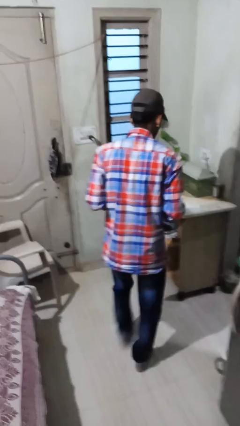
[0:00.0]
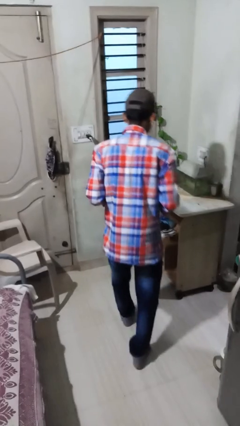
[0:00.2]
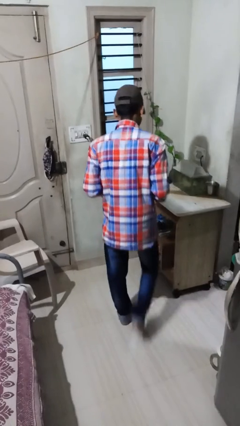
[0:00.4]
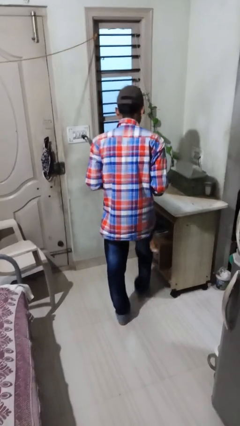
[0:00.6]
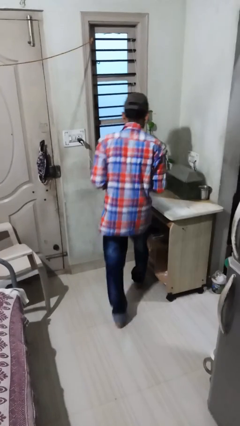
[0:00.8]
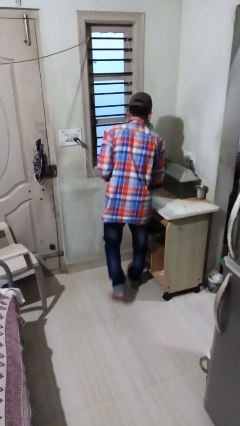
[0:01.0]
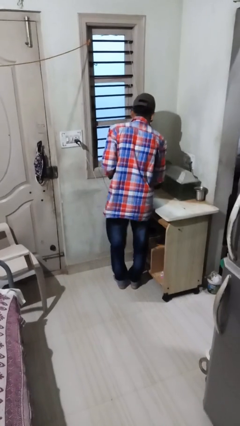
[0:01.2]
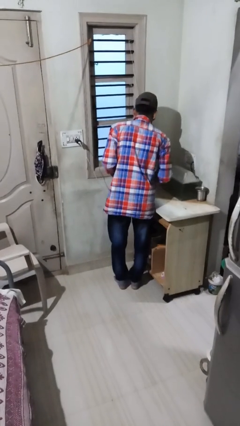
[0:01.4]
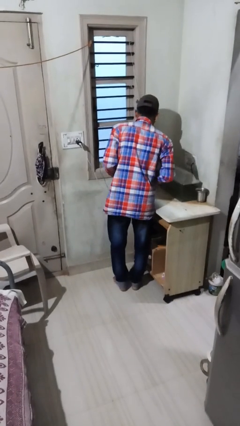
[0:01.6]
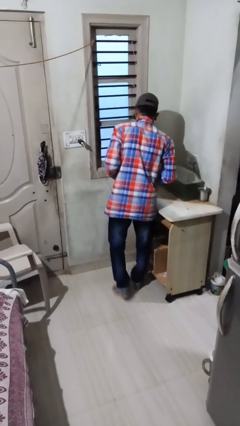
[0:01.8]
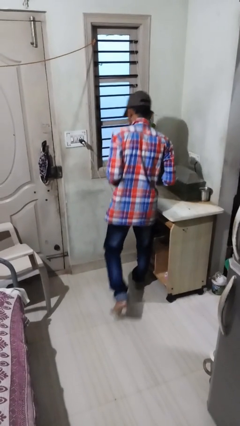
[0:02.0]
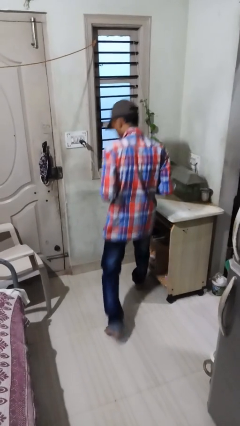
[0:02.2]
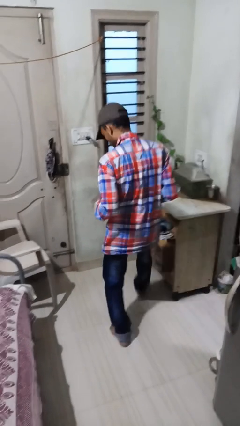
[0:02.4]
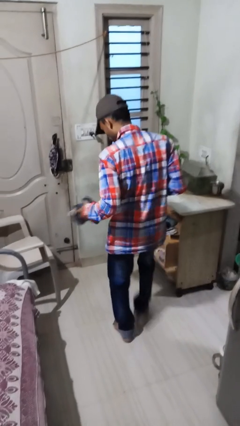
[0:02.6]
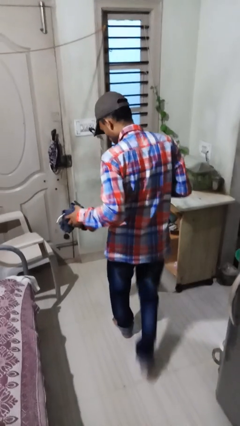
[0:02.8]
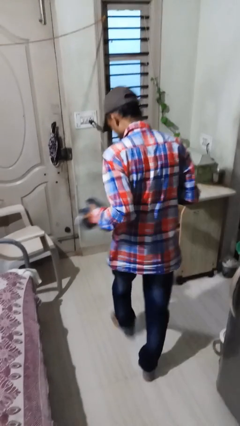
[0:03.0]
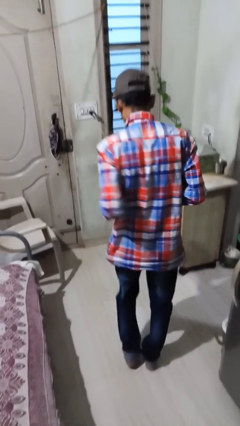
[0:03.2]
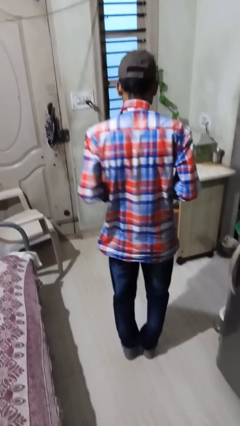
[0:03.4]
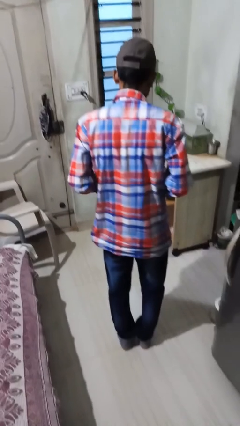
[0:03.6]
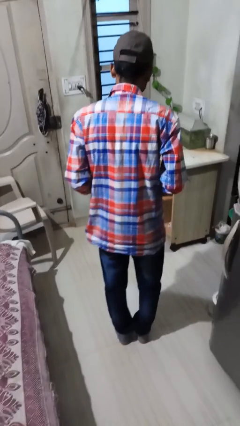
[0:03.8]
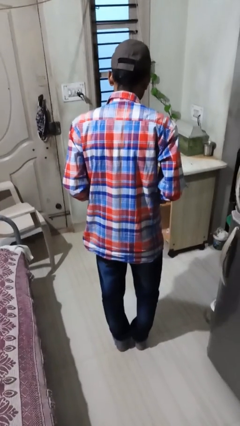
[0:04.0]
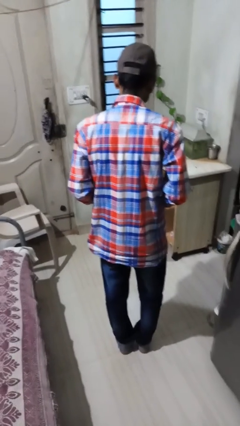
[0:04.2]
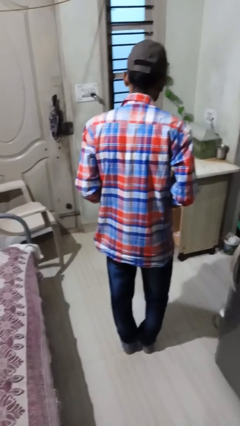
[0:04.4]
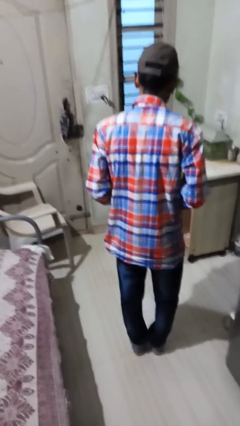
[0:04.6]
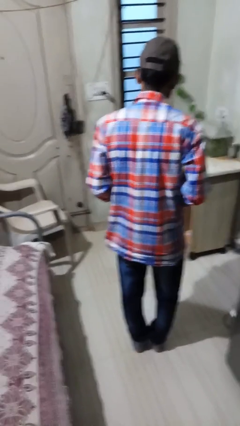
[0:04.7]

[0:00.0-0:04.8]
person picks up object from table

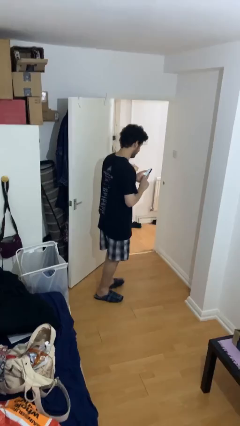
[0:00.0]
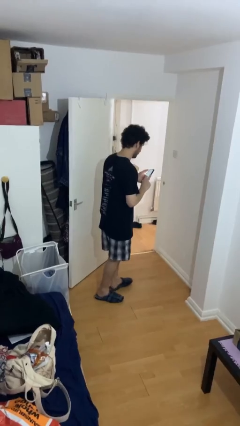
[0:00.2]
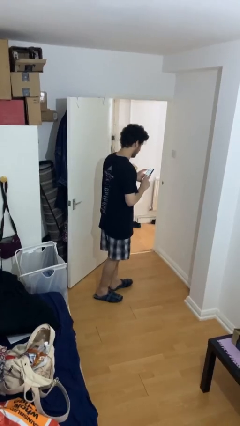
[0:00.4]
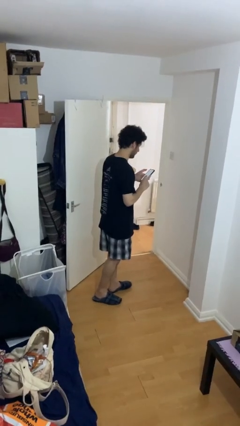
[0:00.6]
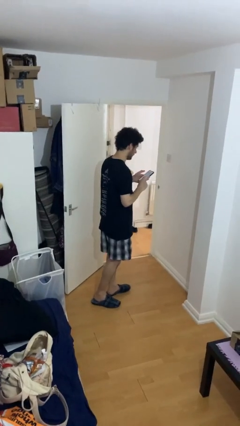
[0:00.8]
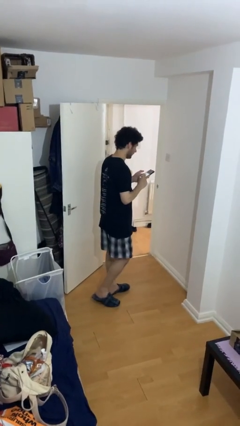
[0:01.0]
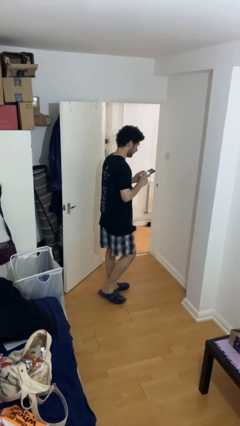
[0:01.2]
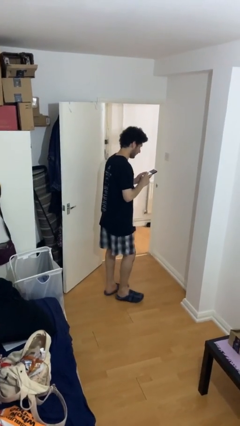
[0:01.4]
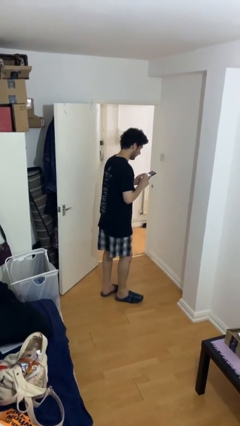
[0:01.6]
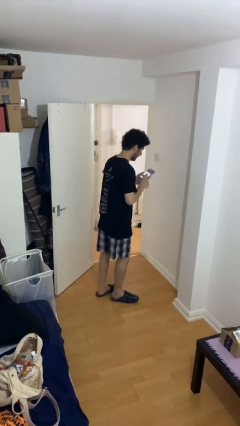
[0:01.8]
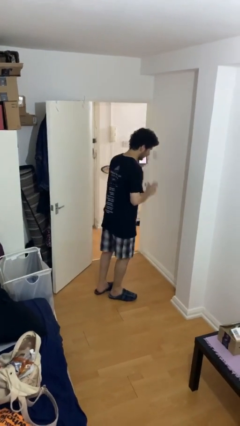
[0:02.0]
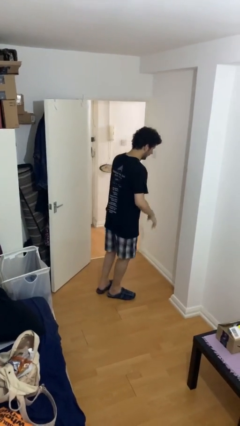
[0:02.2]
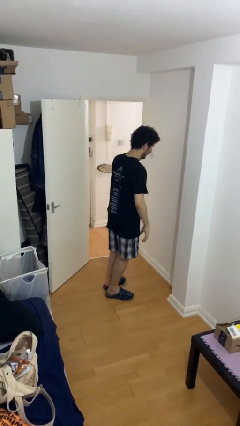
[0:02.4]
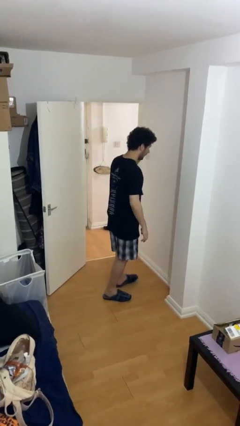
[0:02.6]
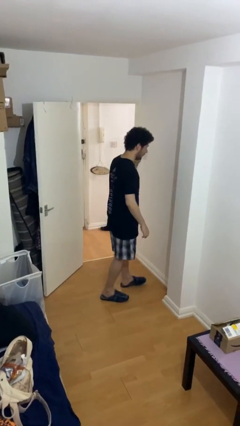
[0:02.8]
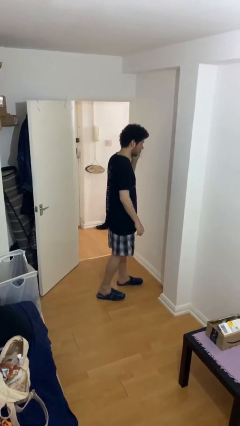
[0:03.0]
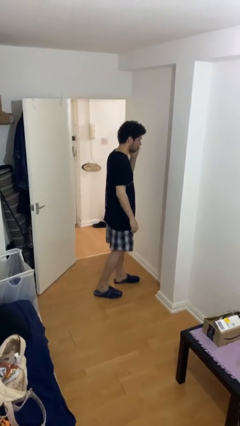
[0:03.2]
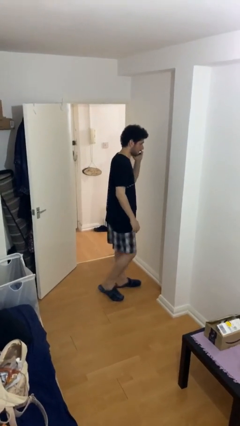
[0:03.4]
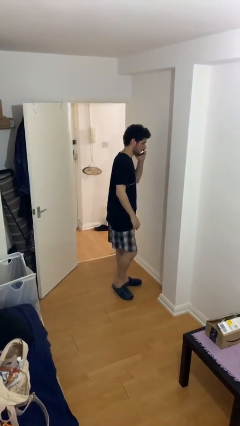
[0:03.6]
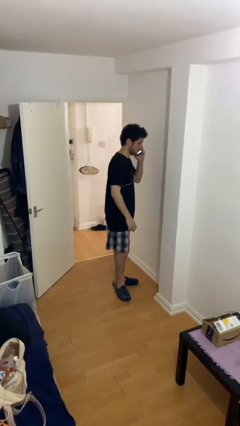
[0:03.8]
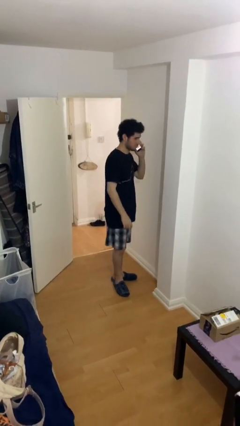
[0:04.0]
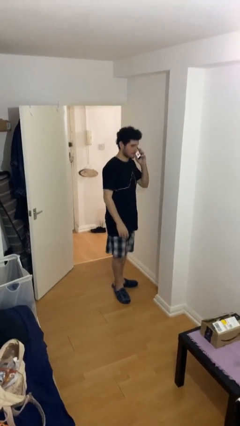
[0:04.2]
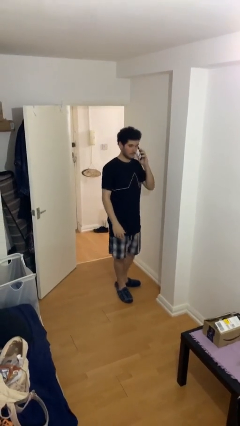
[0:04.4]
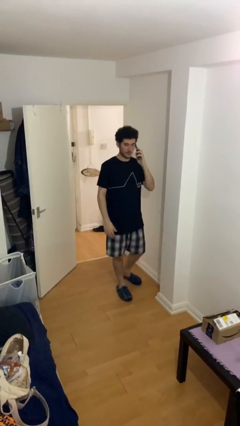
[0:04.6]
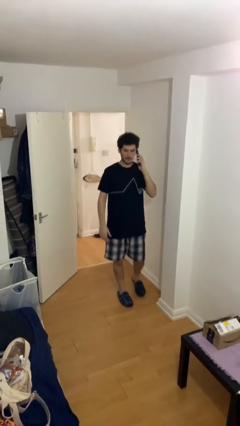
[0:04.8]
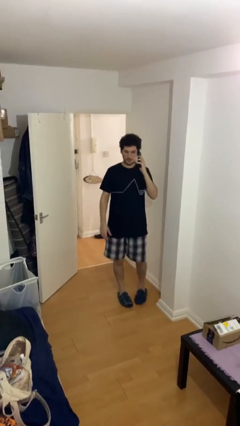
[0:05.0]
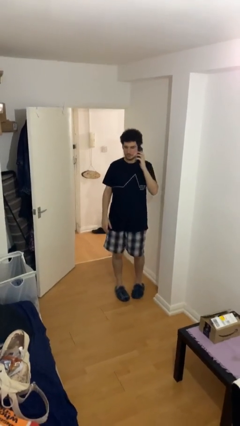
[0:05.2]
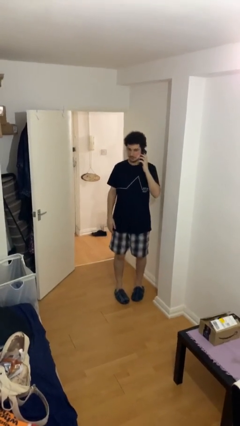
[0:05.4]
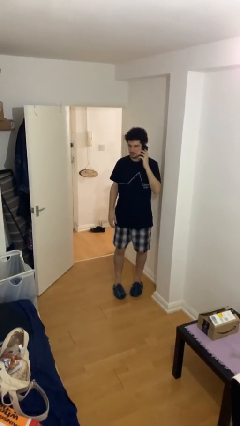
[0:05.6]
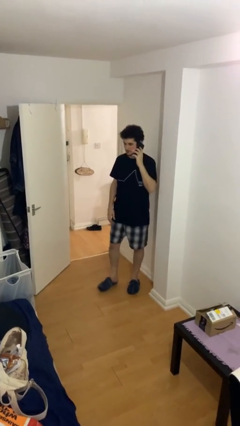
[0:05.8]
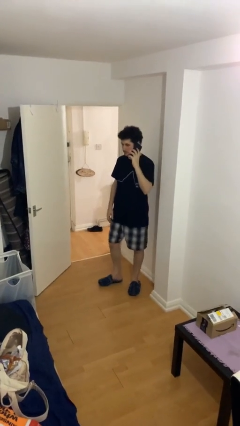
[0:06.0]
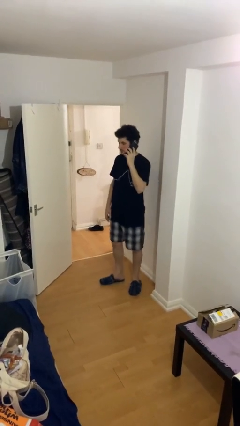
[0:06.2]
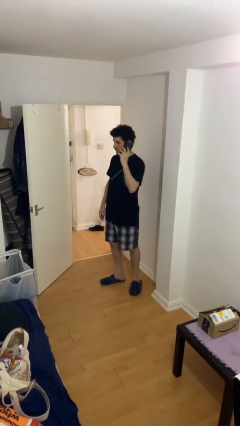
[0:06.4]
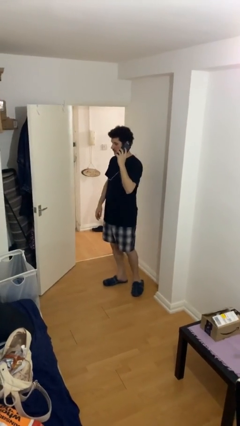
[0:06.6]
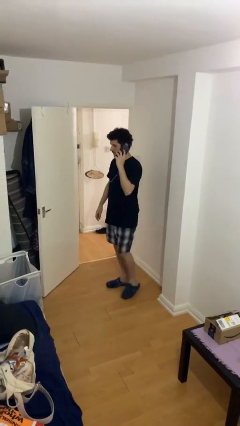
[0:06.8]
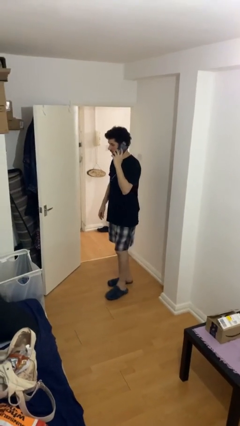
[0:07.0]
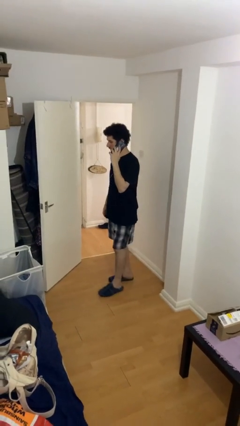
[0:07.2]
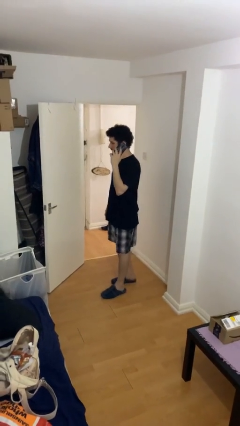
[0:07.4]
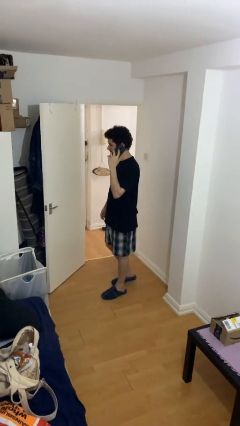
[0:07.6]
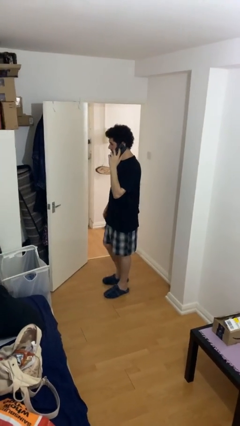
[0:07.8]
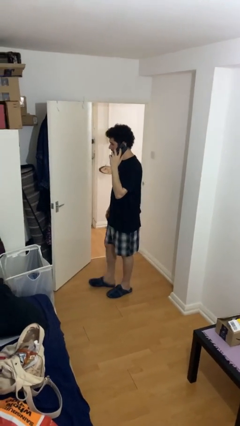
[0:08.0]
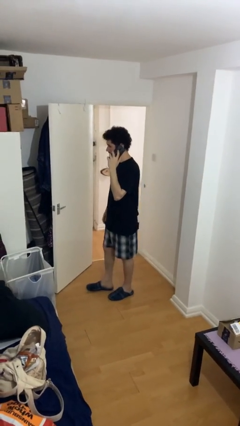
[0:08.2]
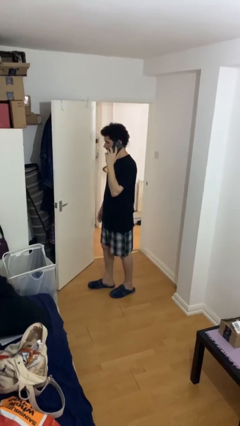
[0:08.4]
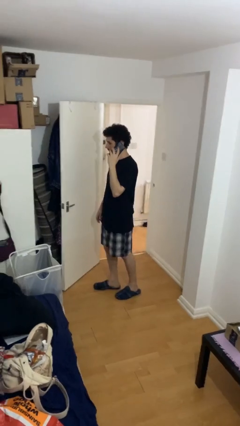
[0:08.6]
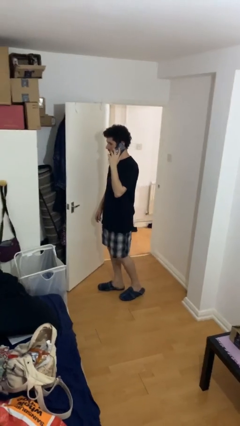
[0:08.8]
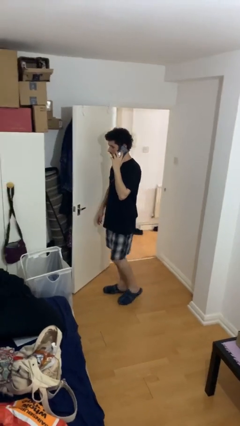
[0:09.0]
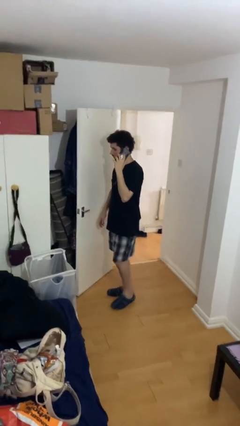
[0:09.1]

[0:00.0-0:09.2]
person talks on phone

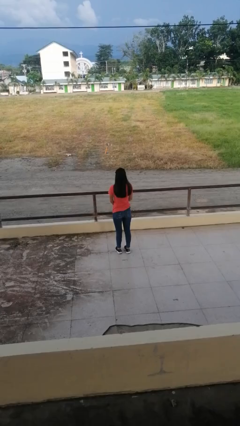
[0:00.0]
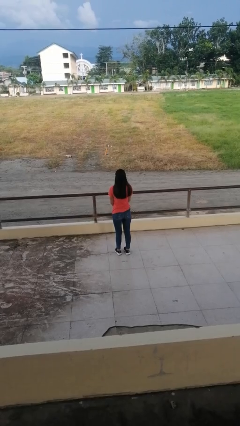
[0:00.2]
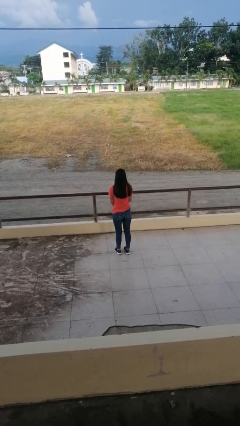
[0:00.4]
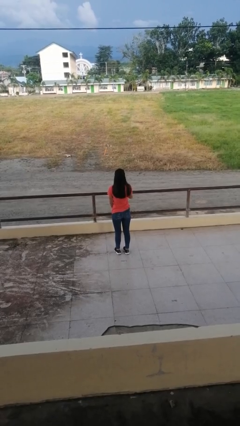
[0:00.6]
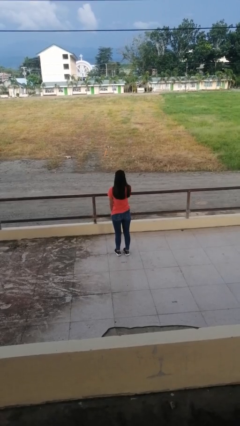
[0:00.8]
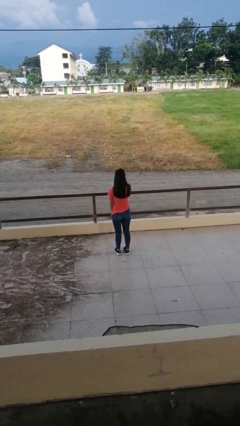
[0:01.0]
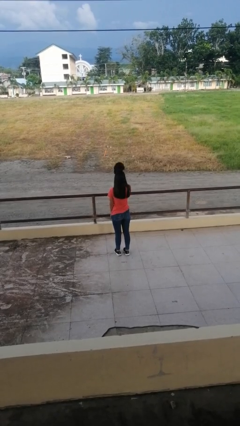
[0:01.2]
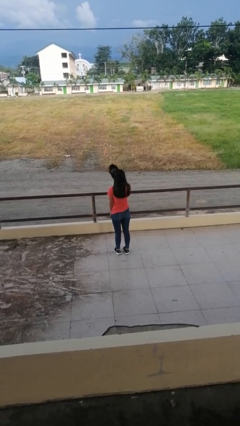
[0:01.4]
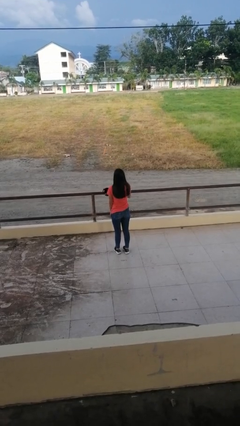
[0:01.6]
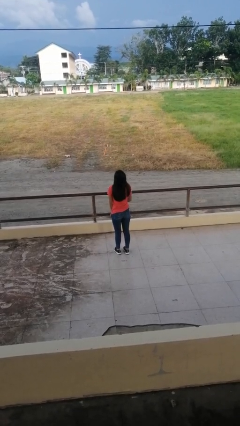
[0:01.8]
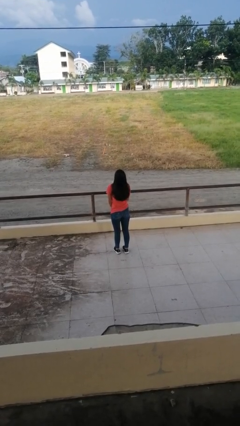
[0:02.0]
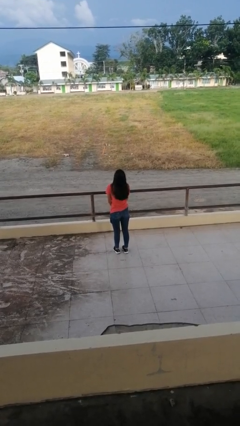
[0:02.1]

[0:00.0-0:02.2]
person takes off hat

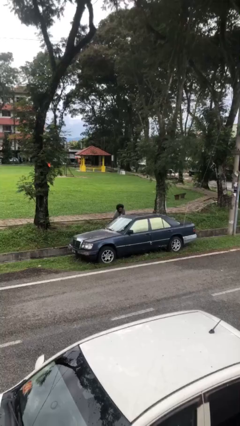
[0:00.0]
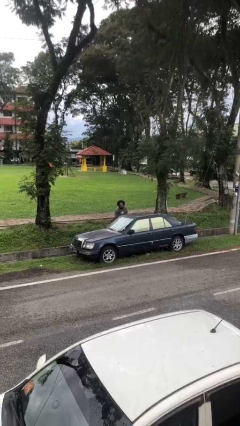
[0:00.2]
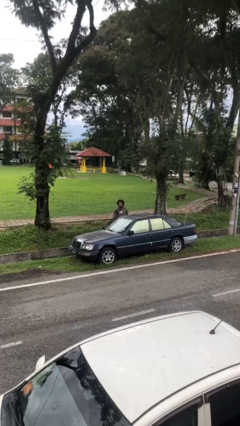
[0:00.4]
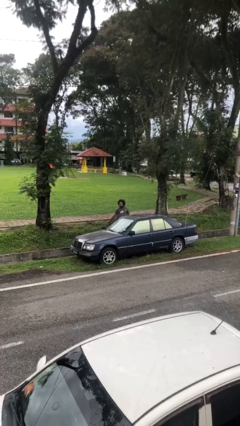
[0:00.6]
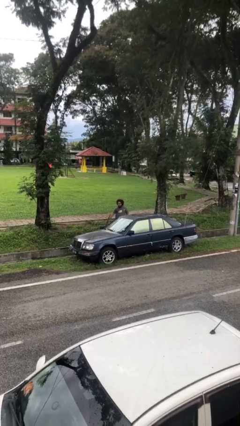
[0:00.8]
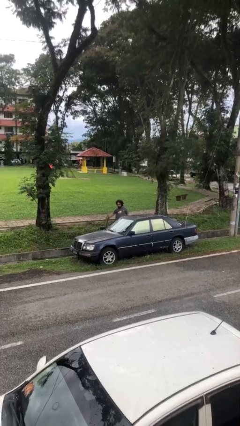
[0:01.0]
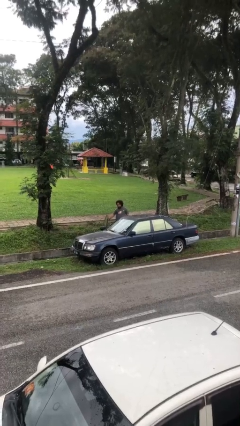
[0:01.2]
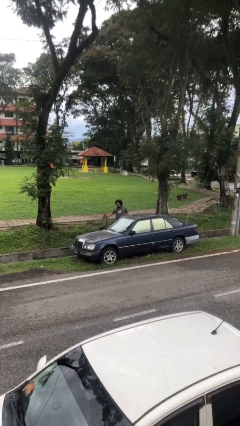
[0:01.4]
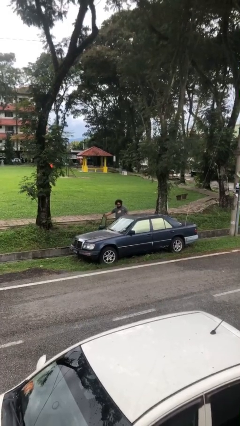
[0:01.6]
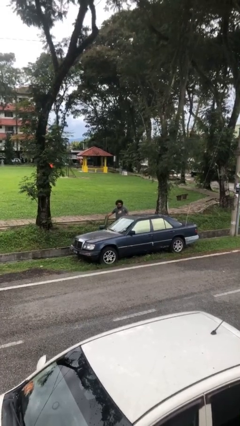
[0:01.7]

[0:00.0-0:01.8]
person opens car door
